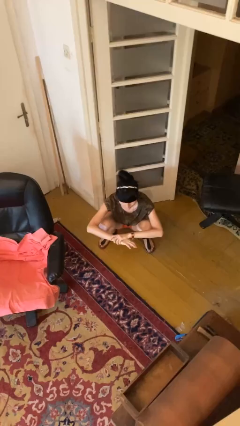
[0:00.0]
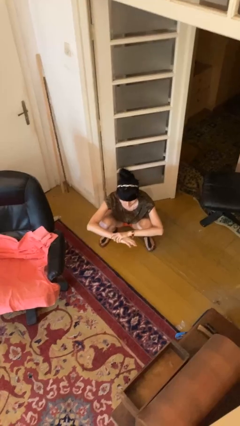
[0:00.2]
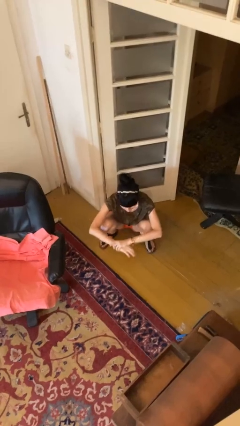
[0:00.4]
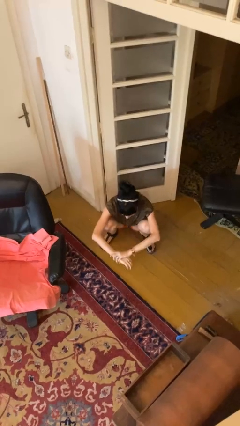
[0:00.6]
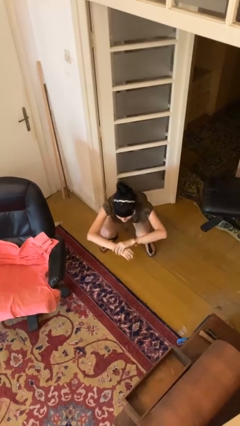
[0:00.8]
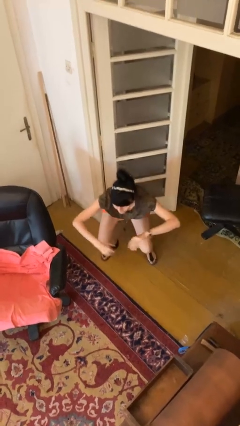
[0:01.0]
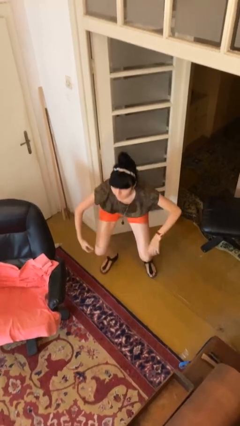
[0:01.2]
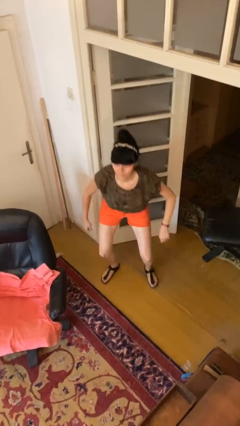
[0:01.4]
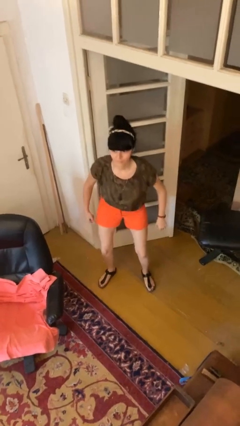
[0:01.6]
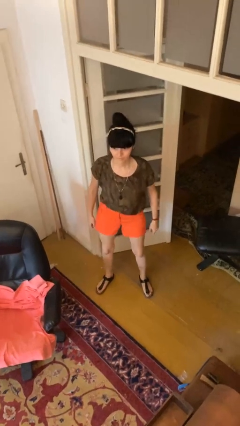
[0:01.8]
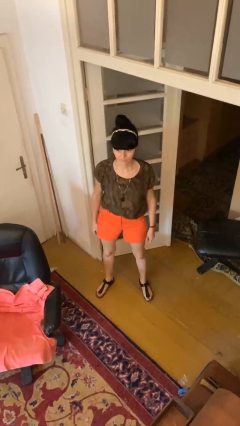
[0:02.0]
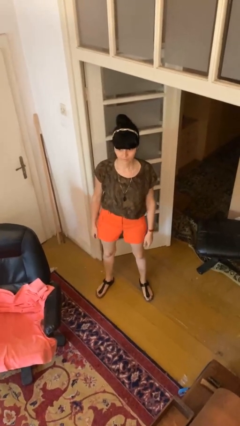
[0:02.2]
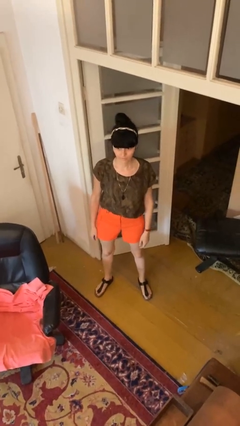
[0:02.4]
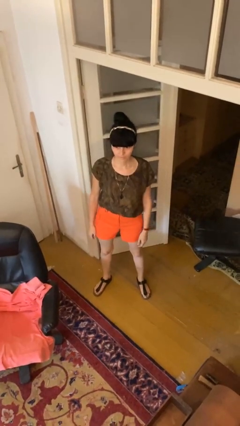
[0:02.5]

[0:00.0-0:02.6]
person stands up

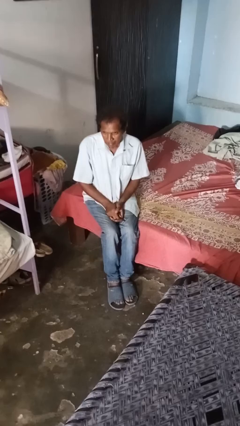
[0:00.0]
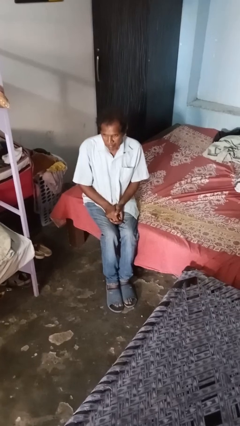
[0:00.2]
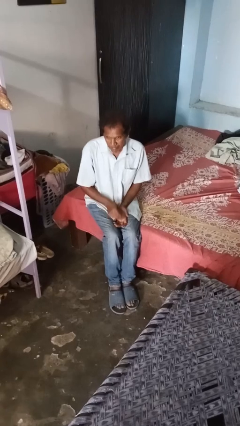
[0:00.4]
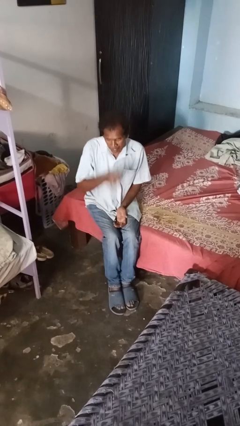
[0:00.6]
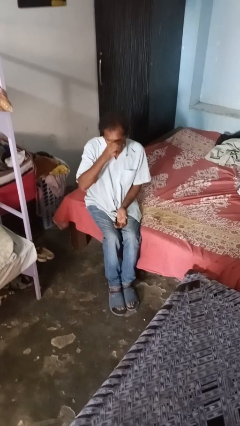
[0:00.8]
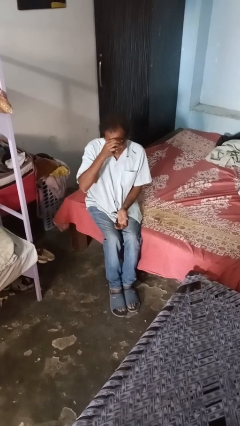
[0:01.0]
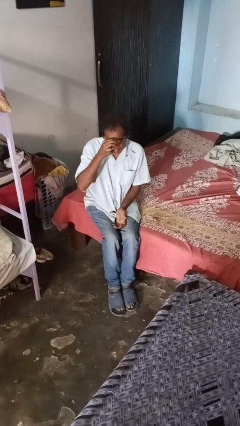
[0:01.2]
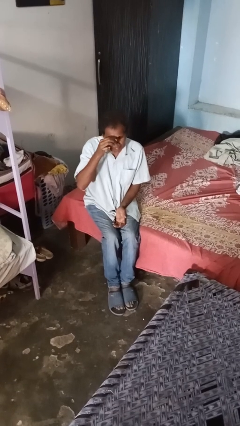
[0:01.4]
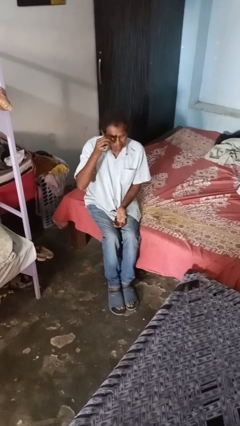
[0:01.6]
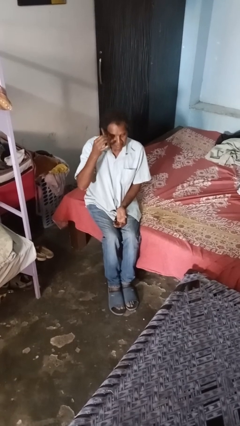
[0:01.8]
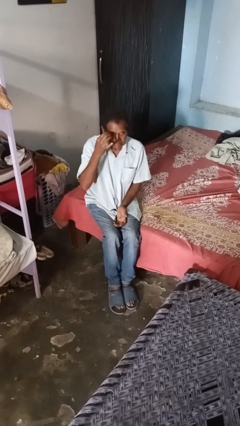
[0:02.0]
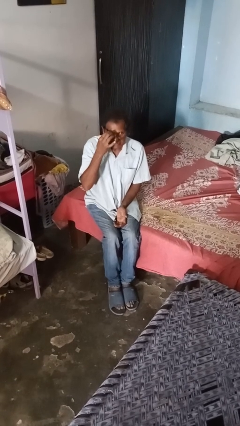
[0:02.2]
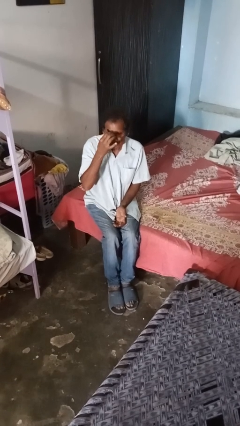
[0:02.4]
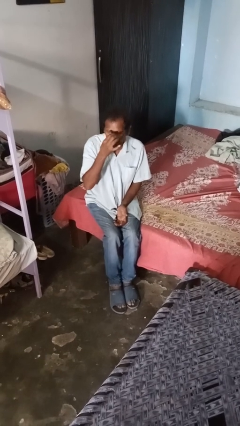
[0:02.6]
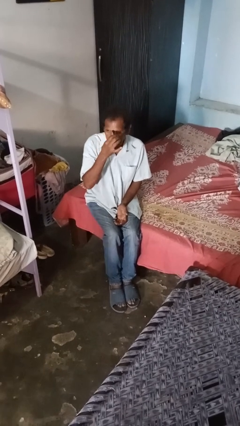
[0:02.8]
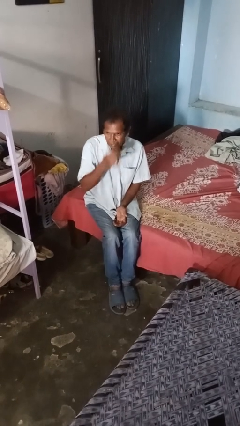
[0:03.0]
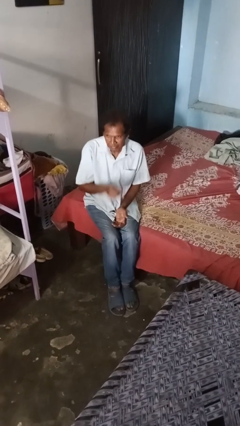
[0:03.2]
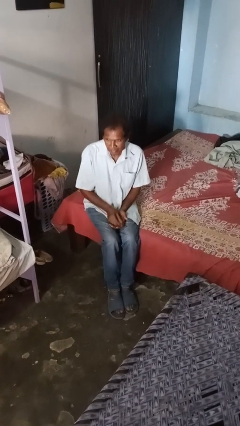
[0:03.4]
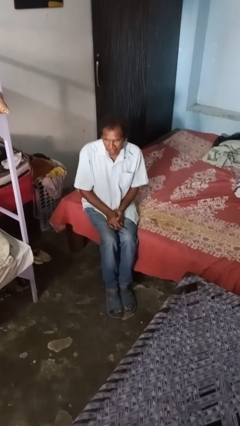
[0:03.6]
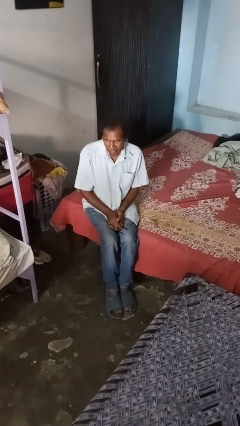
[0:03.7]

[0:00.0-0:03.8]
person applies eye makeup

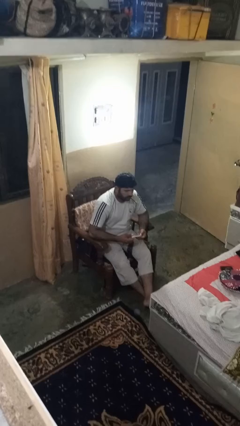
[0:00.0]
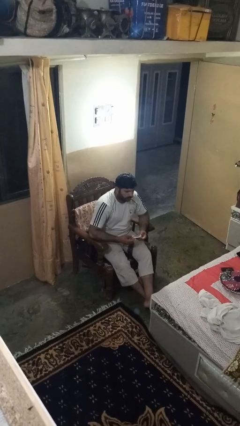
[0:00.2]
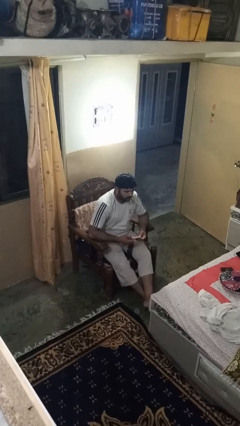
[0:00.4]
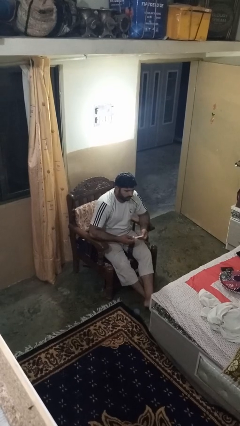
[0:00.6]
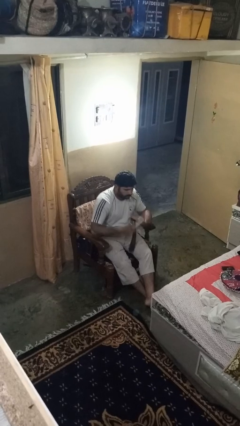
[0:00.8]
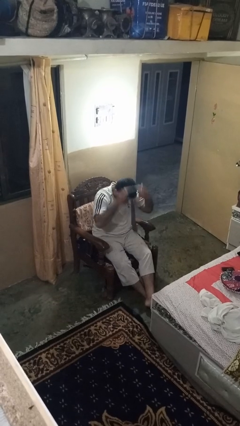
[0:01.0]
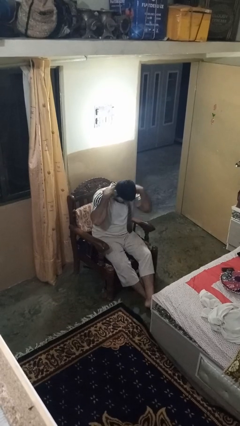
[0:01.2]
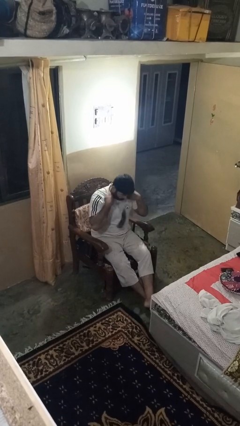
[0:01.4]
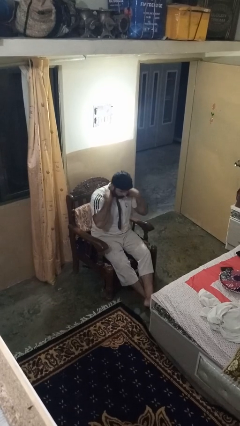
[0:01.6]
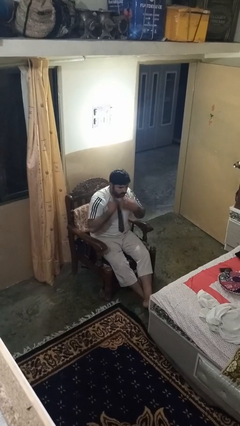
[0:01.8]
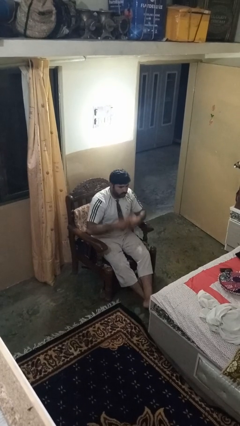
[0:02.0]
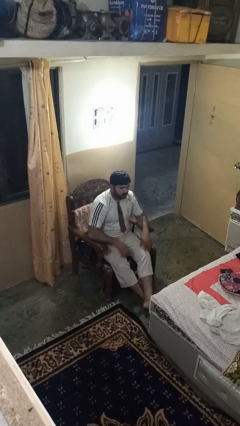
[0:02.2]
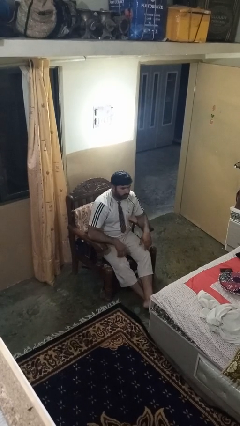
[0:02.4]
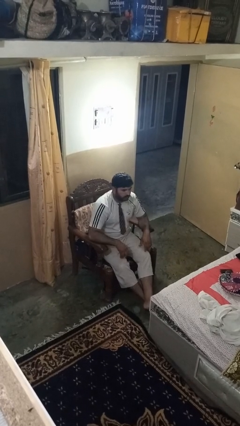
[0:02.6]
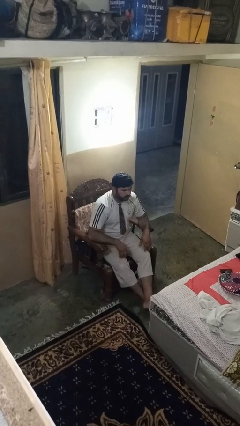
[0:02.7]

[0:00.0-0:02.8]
person puts on necktie

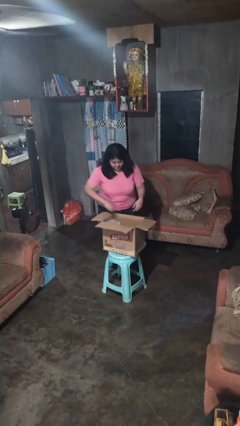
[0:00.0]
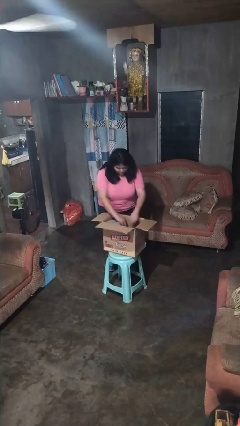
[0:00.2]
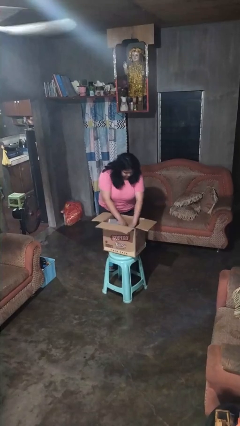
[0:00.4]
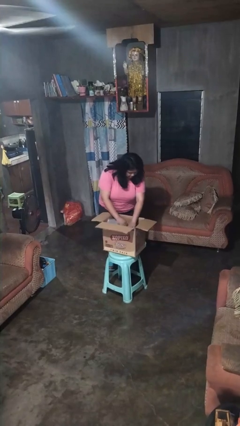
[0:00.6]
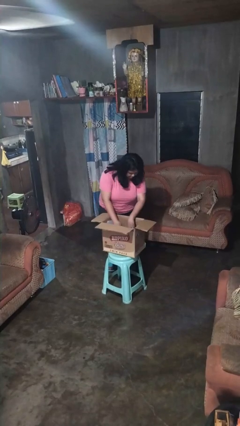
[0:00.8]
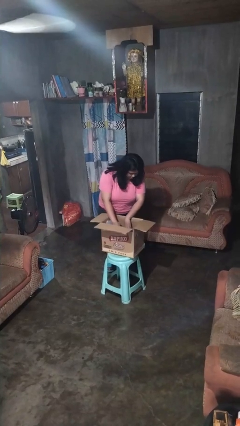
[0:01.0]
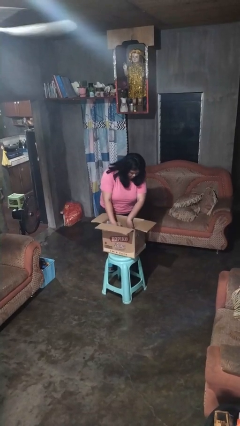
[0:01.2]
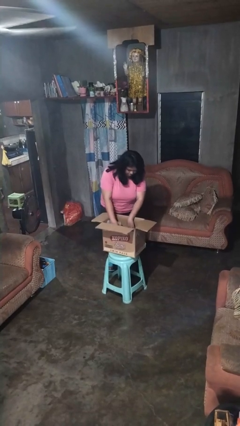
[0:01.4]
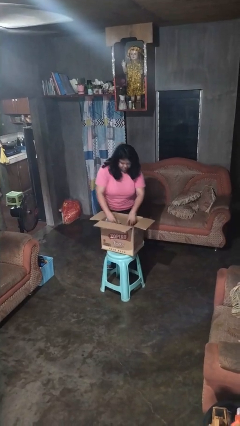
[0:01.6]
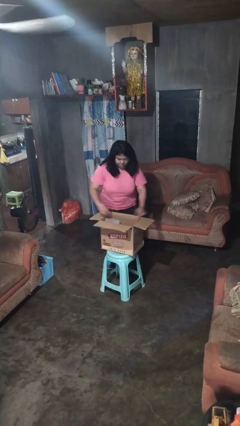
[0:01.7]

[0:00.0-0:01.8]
person searches in box

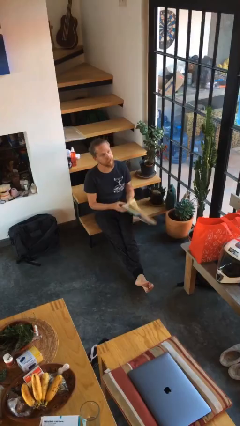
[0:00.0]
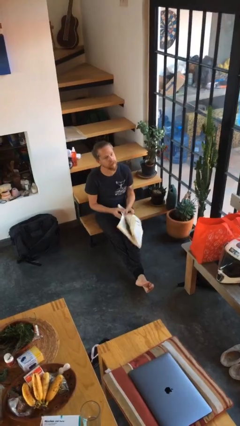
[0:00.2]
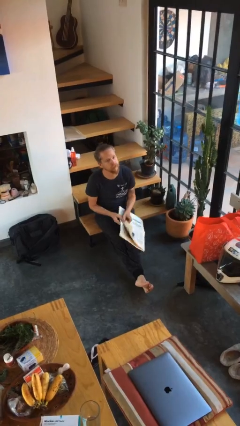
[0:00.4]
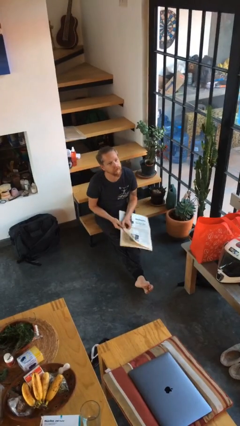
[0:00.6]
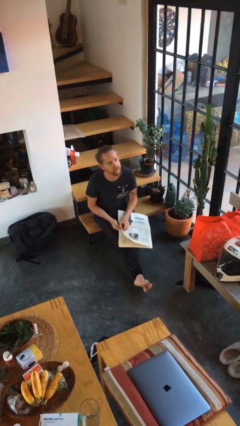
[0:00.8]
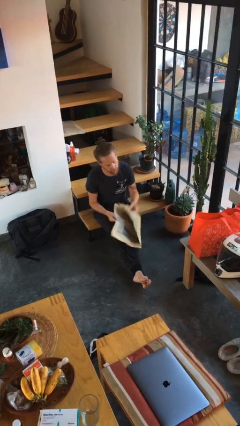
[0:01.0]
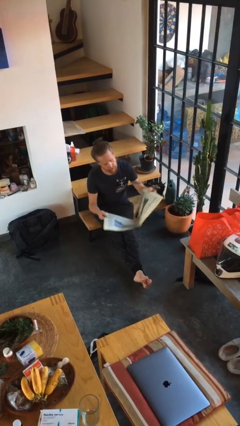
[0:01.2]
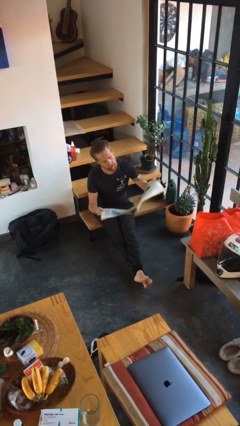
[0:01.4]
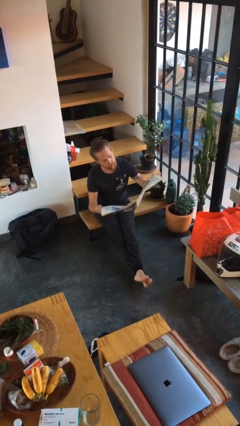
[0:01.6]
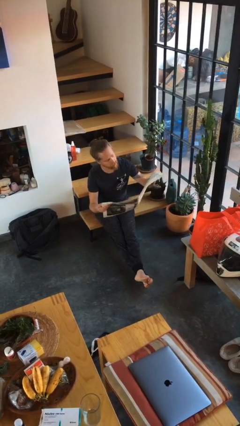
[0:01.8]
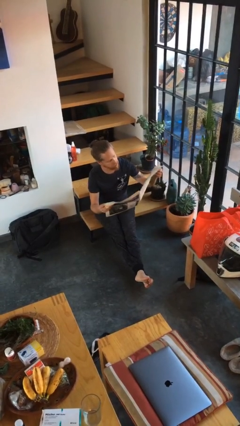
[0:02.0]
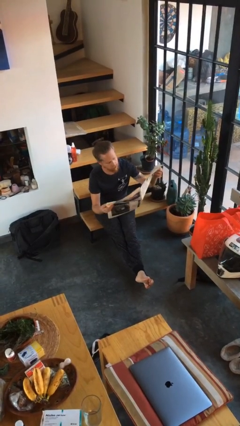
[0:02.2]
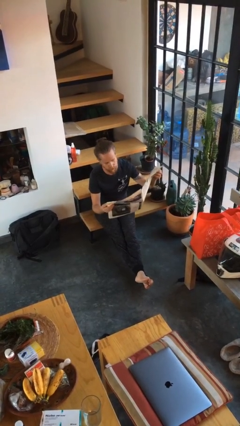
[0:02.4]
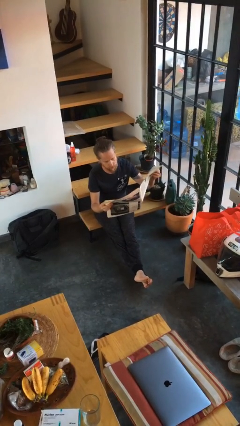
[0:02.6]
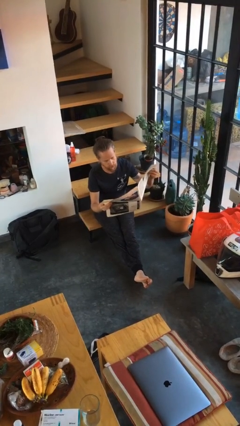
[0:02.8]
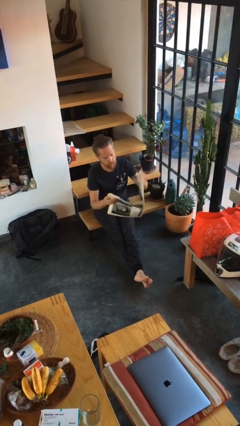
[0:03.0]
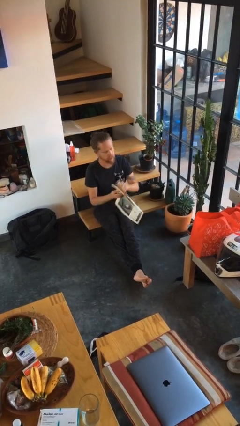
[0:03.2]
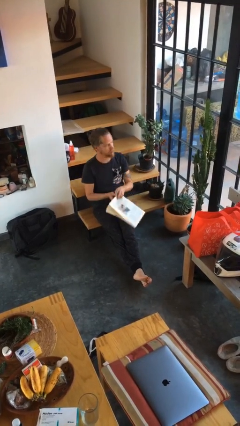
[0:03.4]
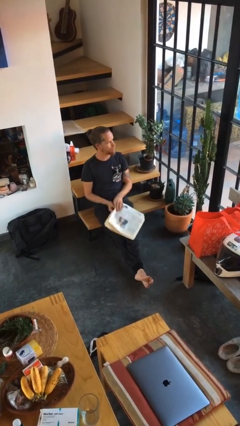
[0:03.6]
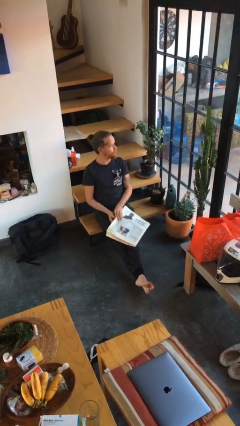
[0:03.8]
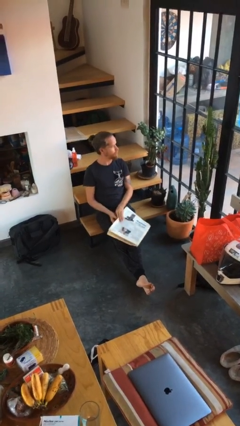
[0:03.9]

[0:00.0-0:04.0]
person reads newspaper

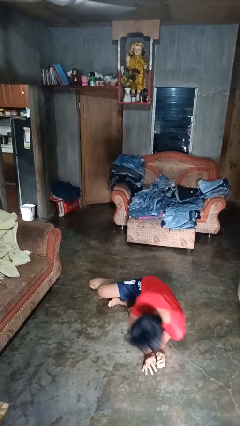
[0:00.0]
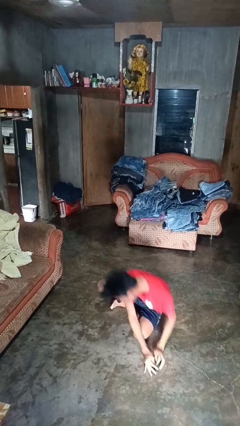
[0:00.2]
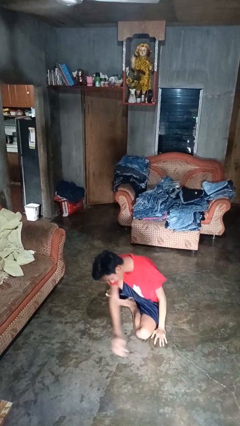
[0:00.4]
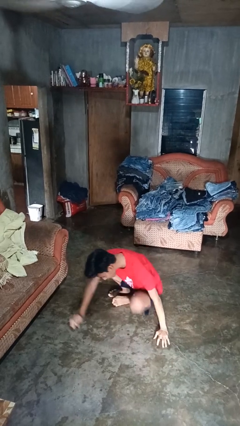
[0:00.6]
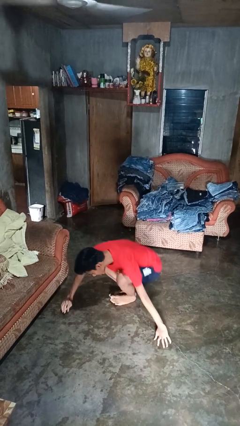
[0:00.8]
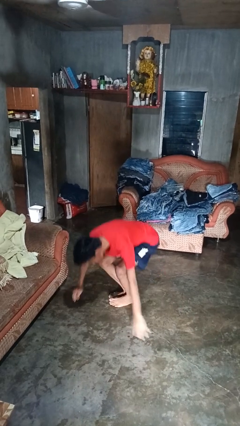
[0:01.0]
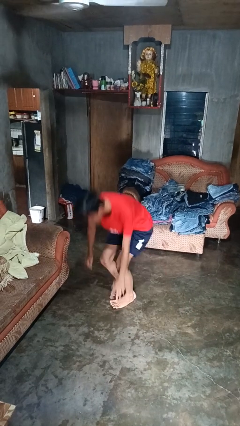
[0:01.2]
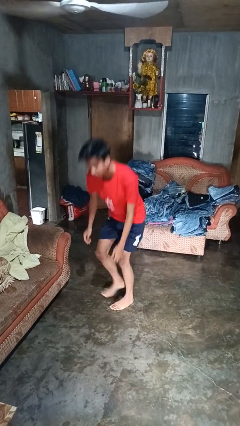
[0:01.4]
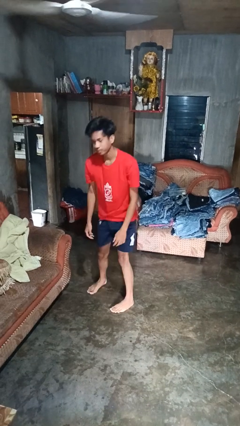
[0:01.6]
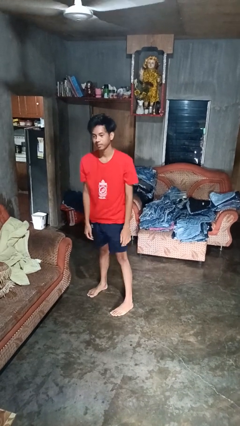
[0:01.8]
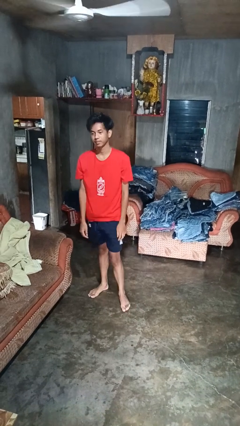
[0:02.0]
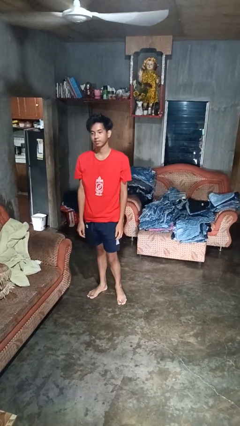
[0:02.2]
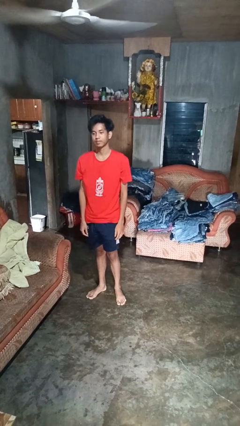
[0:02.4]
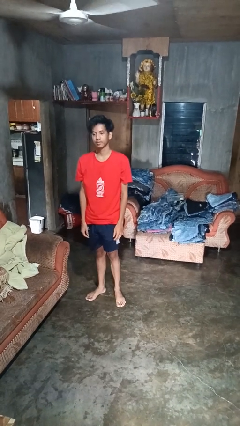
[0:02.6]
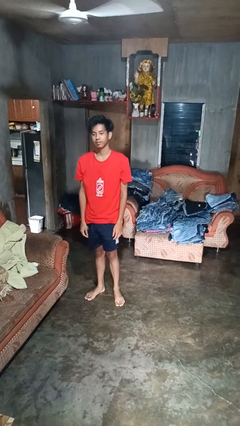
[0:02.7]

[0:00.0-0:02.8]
person stands up from floor
